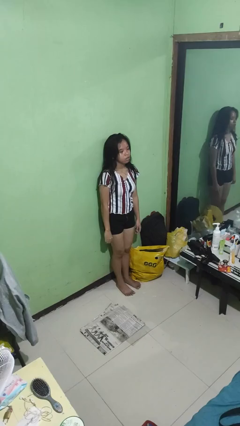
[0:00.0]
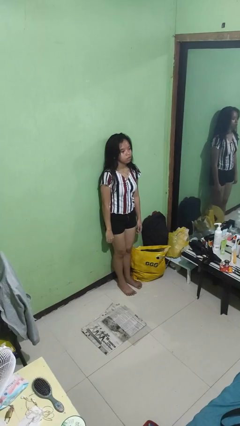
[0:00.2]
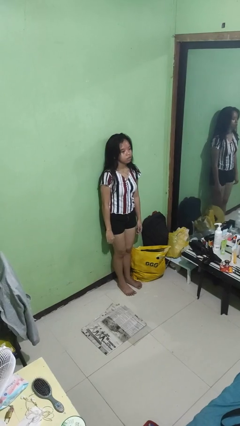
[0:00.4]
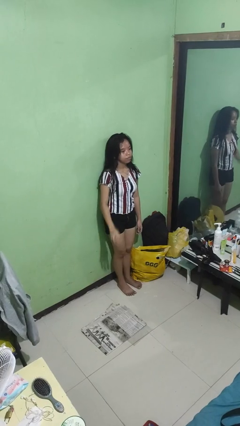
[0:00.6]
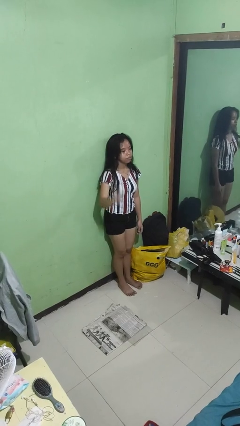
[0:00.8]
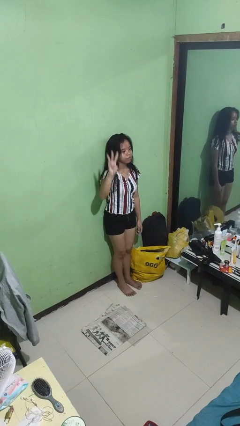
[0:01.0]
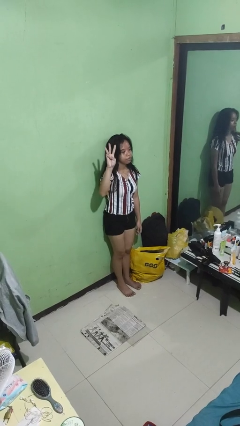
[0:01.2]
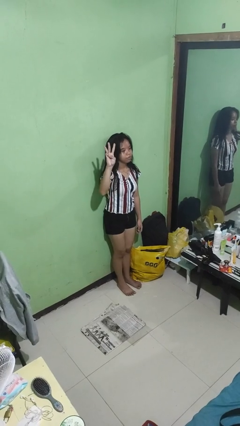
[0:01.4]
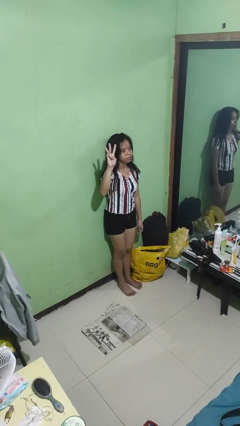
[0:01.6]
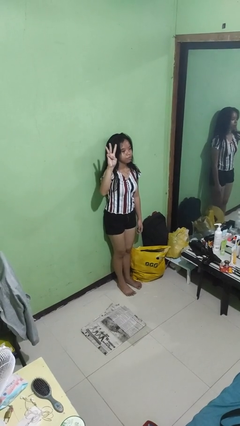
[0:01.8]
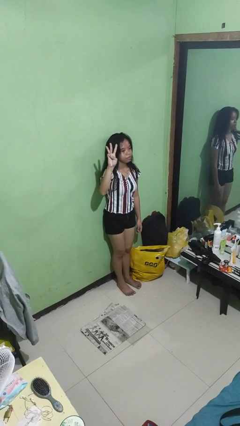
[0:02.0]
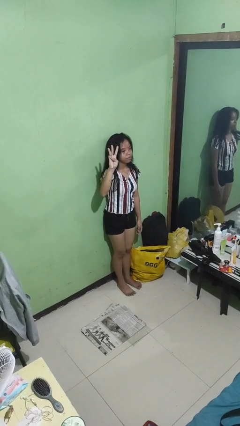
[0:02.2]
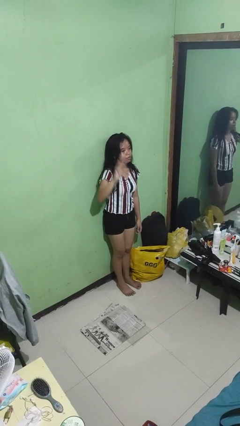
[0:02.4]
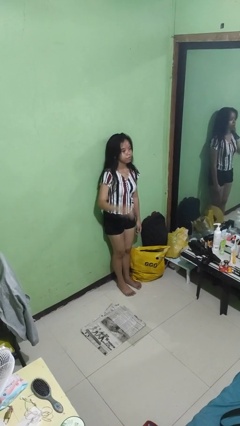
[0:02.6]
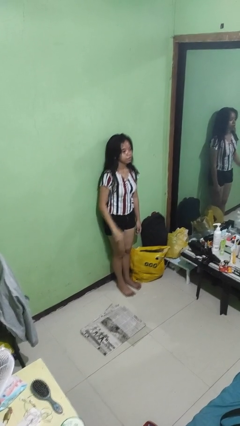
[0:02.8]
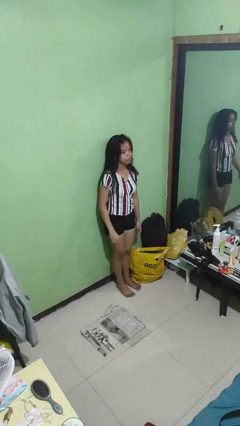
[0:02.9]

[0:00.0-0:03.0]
person gestures number three

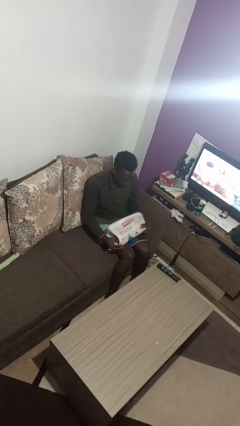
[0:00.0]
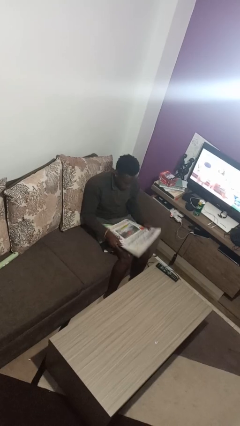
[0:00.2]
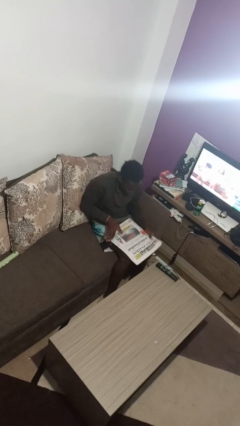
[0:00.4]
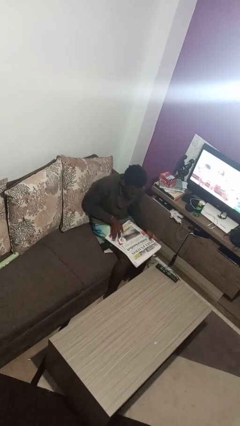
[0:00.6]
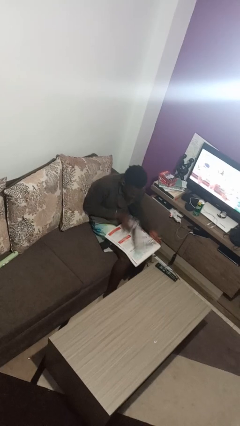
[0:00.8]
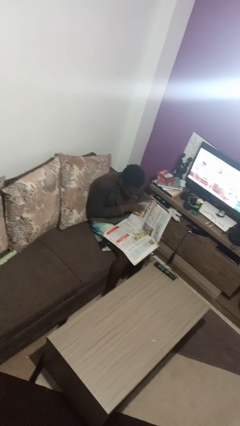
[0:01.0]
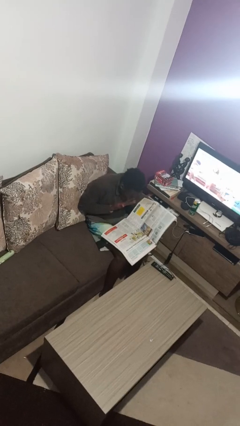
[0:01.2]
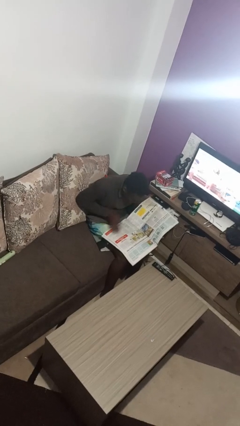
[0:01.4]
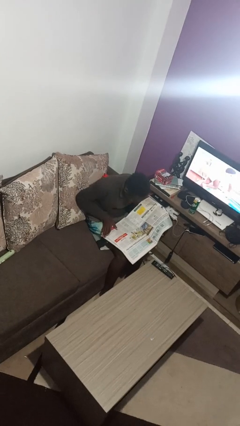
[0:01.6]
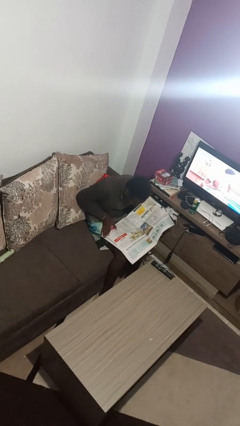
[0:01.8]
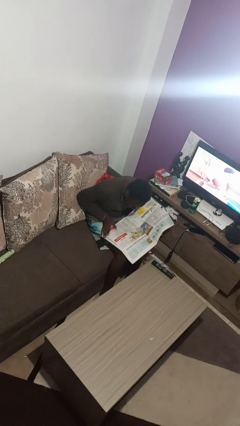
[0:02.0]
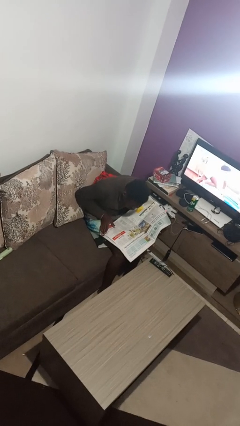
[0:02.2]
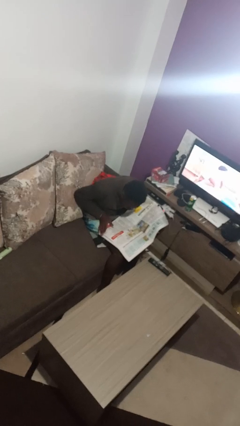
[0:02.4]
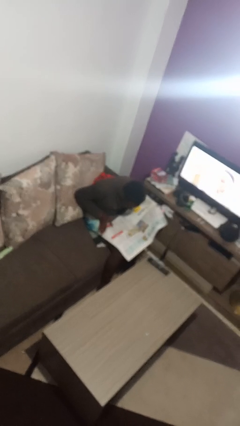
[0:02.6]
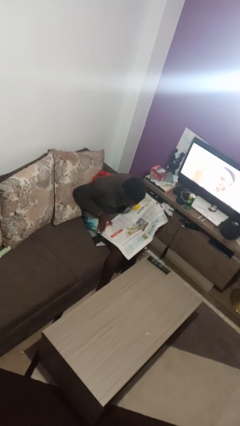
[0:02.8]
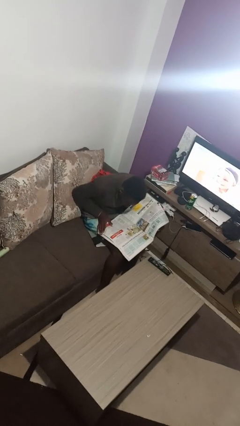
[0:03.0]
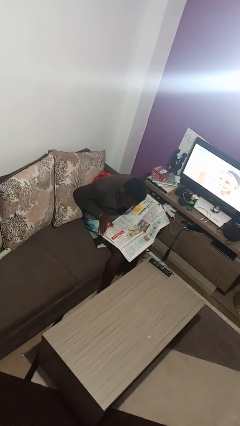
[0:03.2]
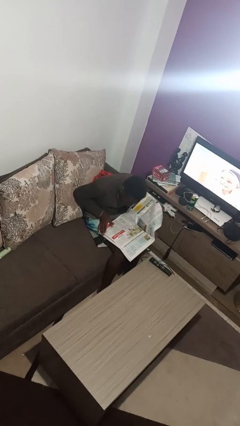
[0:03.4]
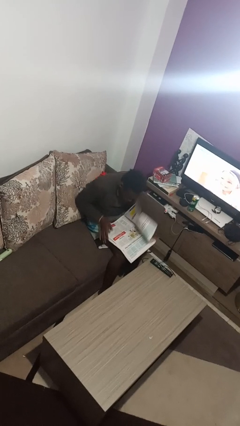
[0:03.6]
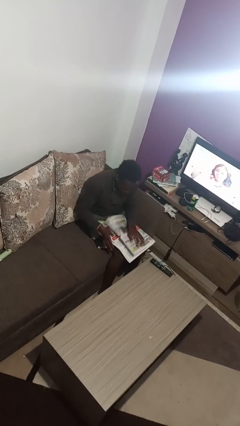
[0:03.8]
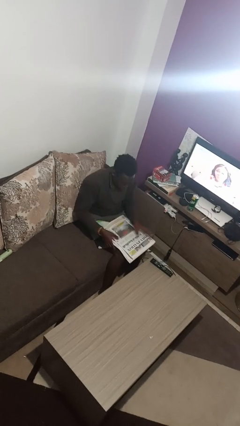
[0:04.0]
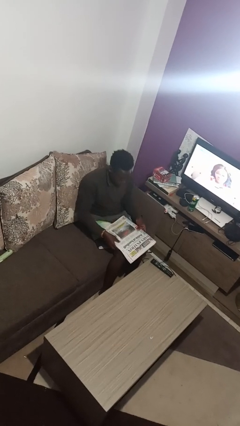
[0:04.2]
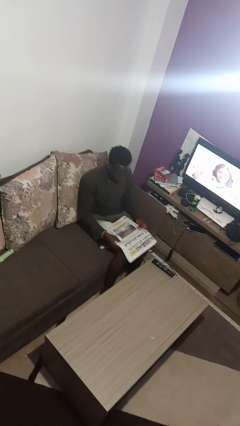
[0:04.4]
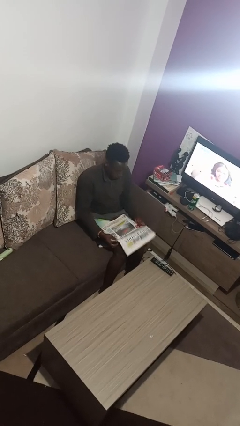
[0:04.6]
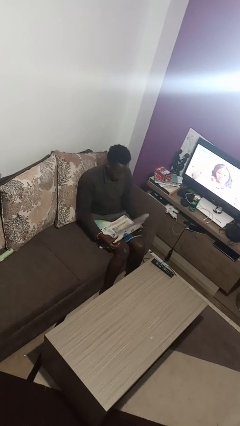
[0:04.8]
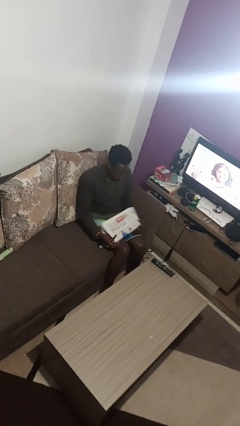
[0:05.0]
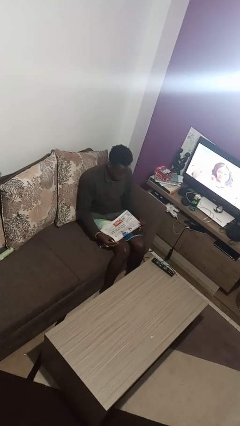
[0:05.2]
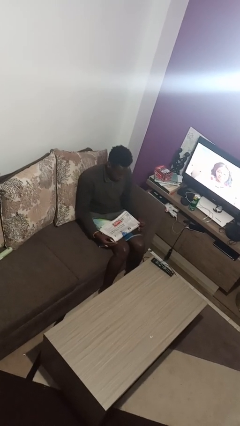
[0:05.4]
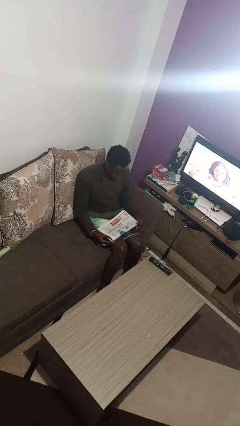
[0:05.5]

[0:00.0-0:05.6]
person reads newspaper

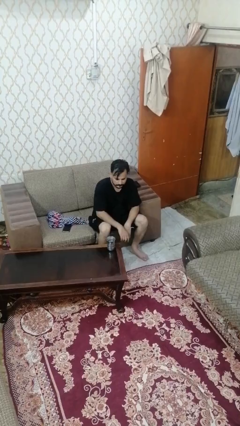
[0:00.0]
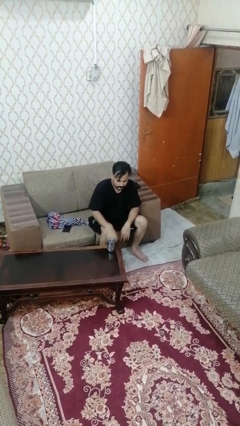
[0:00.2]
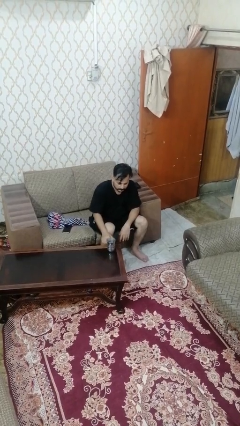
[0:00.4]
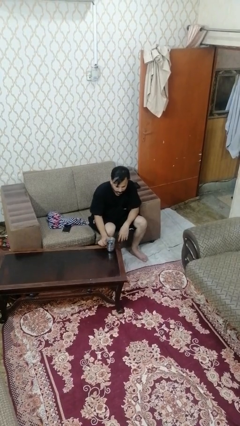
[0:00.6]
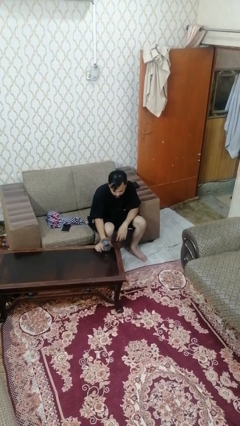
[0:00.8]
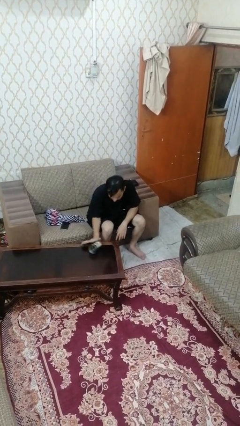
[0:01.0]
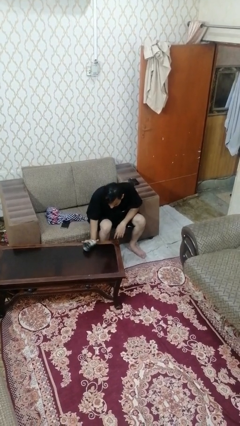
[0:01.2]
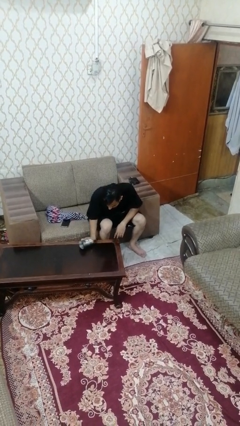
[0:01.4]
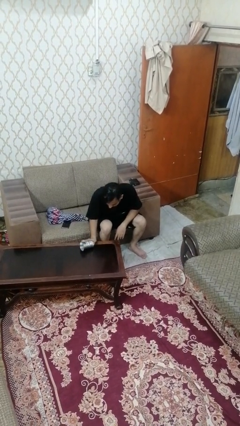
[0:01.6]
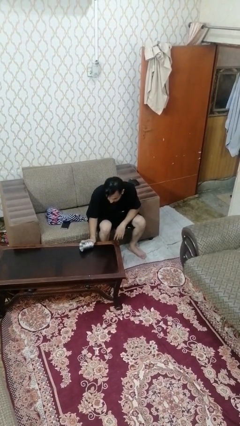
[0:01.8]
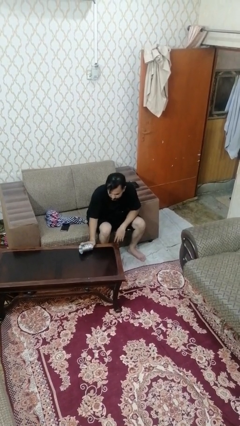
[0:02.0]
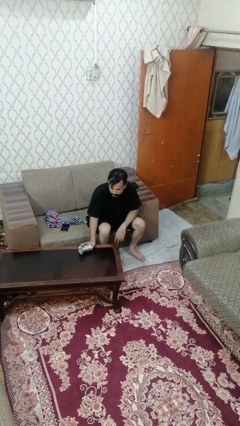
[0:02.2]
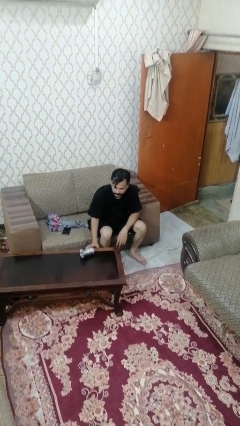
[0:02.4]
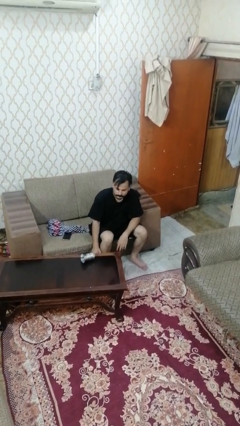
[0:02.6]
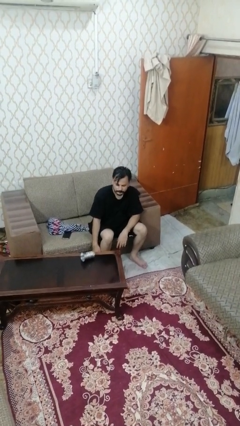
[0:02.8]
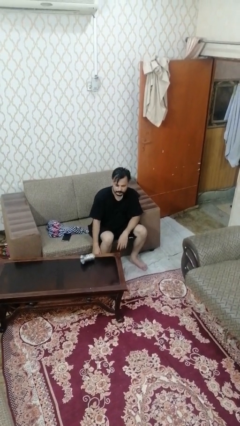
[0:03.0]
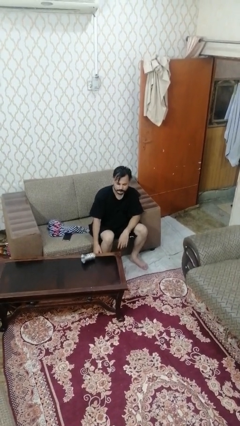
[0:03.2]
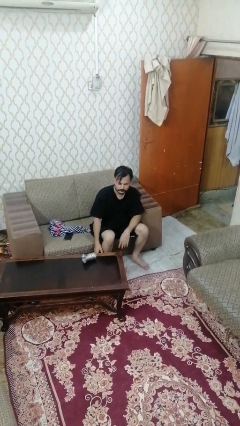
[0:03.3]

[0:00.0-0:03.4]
person knocks over glass

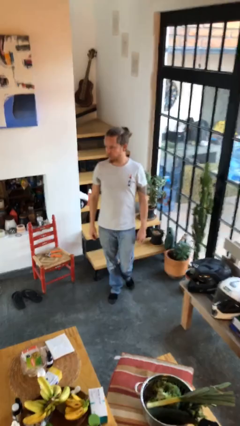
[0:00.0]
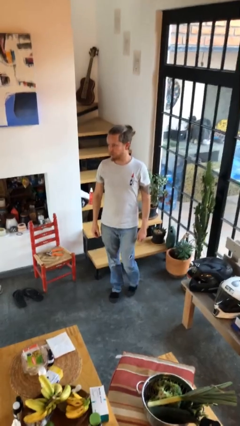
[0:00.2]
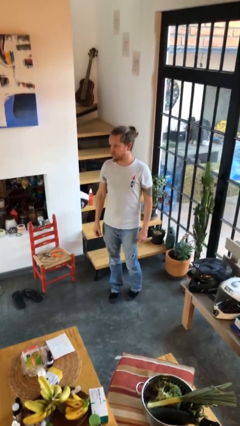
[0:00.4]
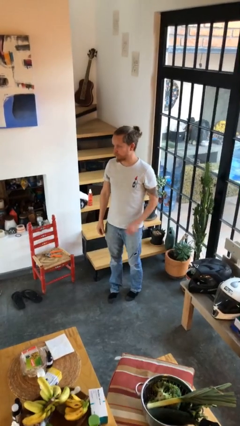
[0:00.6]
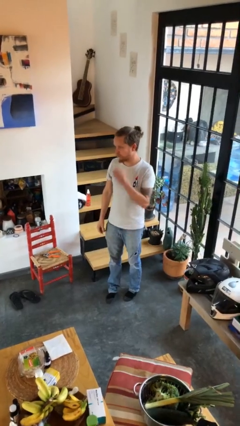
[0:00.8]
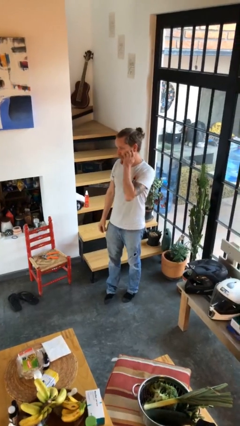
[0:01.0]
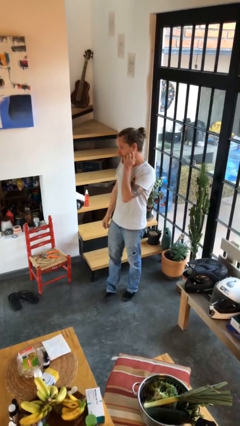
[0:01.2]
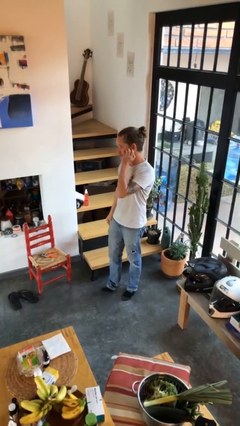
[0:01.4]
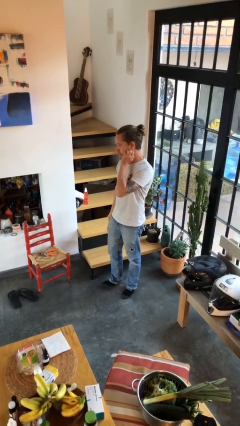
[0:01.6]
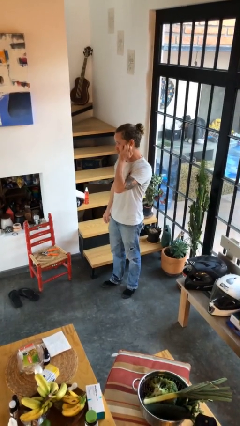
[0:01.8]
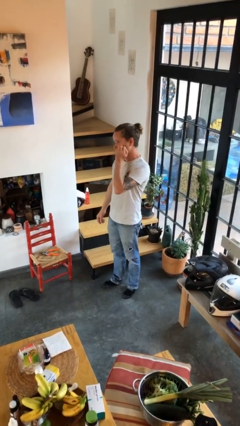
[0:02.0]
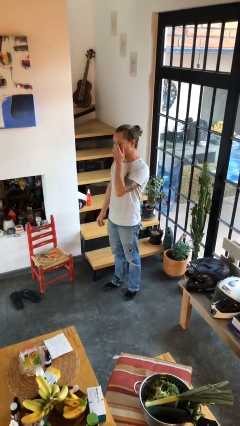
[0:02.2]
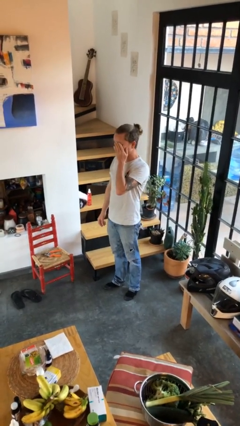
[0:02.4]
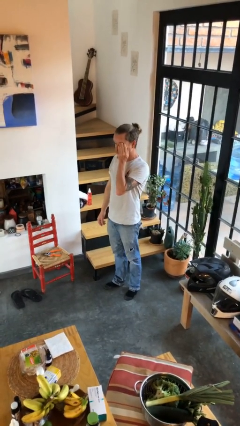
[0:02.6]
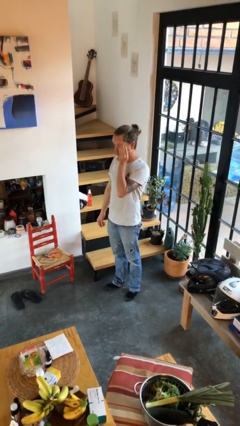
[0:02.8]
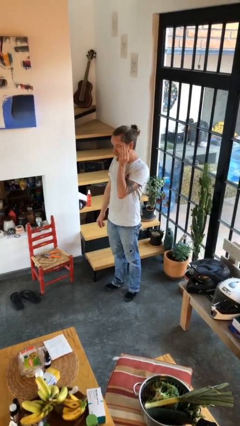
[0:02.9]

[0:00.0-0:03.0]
person scratches face

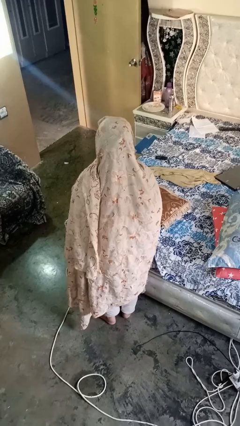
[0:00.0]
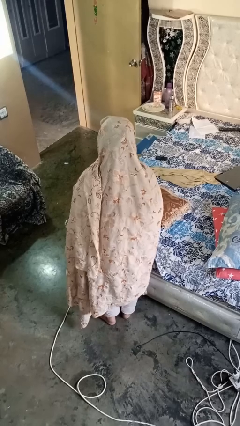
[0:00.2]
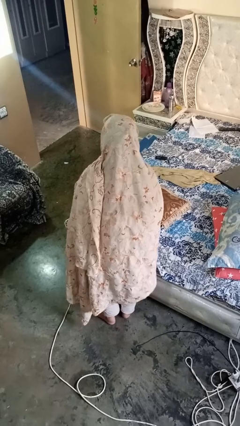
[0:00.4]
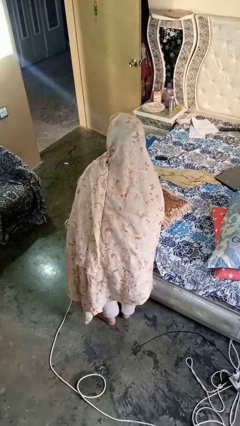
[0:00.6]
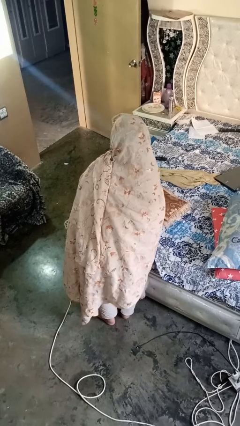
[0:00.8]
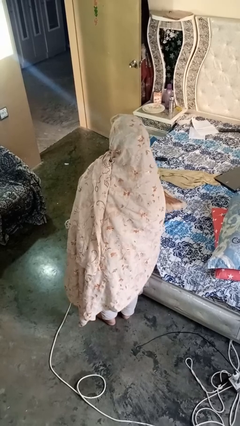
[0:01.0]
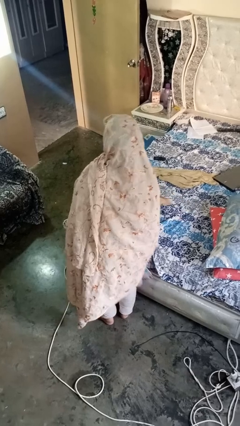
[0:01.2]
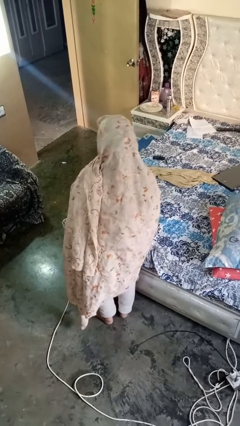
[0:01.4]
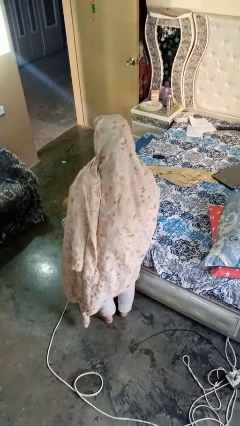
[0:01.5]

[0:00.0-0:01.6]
person picks up object from bed

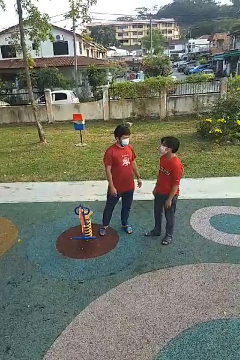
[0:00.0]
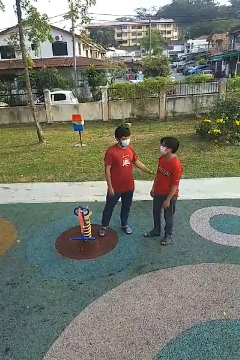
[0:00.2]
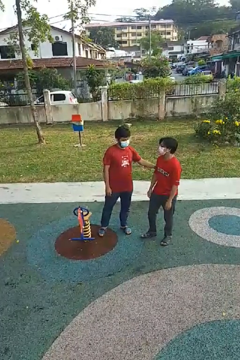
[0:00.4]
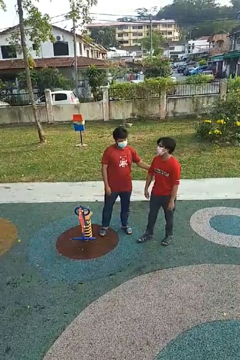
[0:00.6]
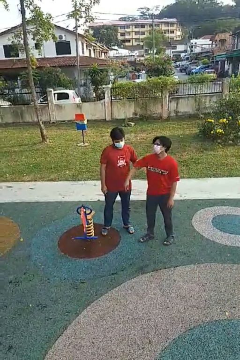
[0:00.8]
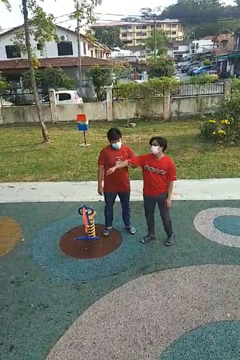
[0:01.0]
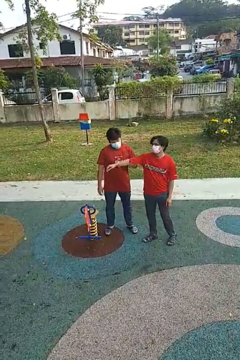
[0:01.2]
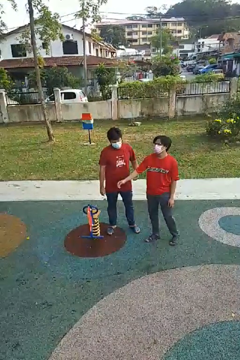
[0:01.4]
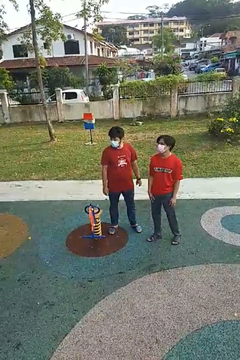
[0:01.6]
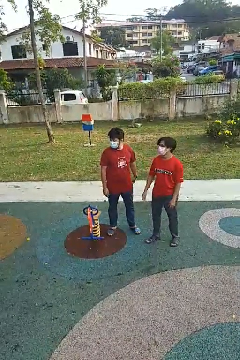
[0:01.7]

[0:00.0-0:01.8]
person grabs person by bicep
